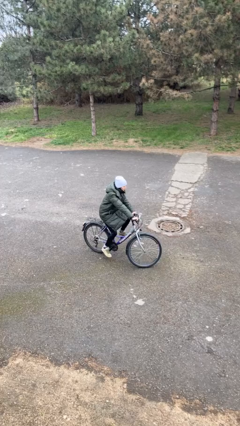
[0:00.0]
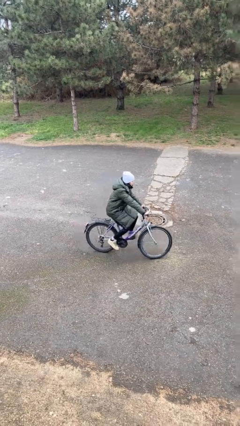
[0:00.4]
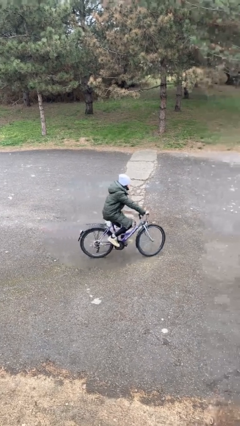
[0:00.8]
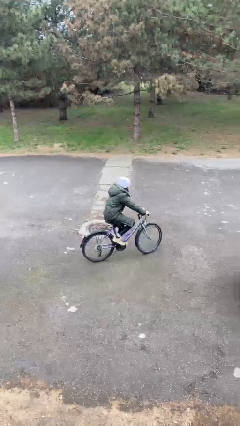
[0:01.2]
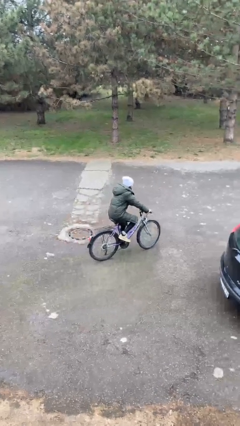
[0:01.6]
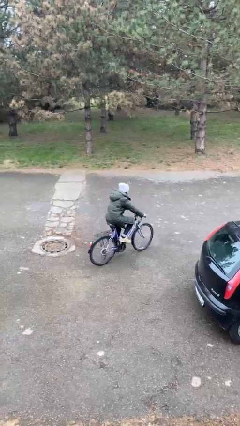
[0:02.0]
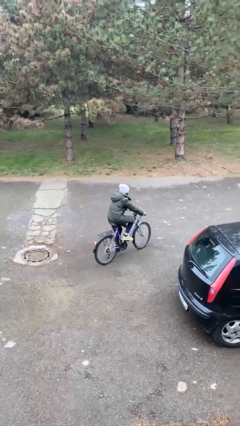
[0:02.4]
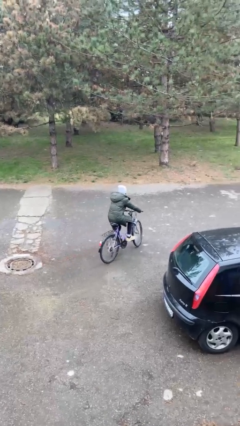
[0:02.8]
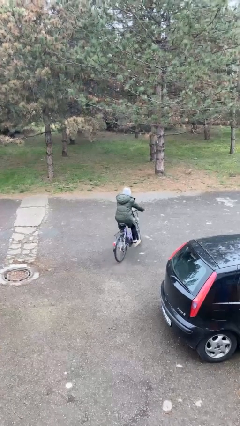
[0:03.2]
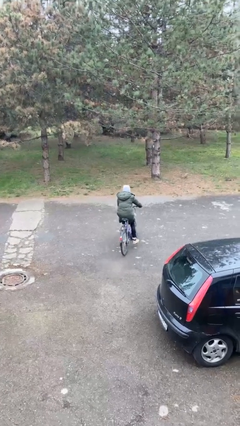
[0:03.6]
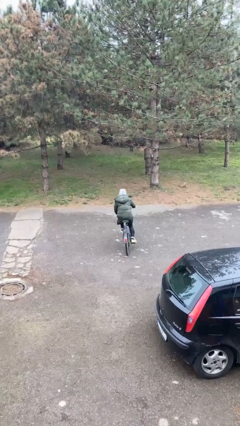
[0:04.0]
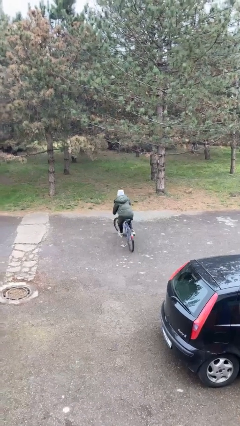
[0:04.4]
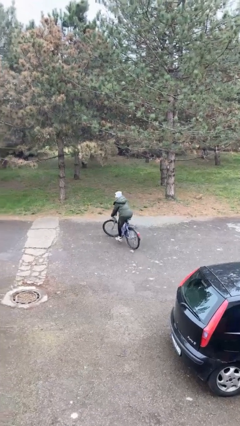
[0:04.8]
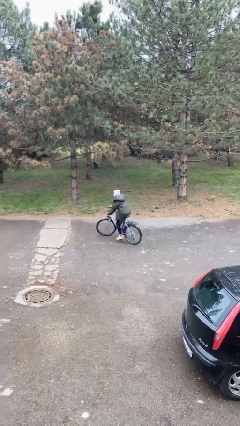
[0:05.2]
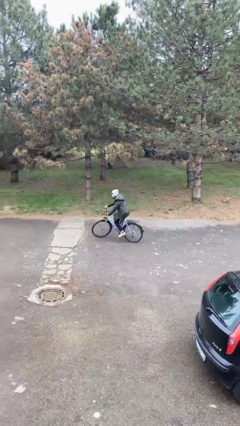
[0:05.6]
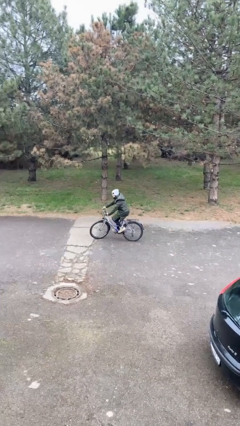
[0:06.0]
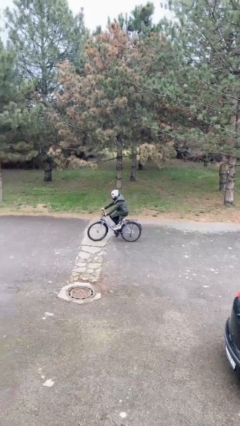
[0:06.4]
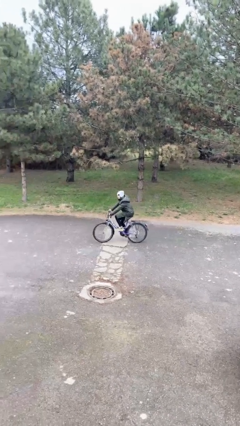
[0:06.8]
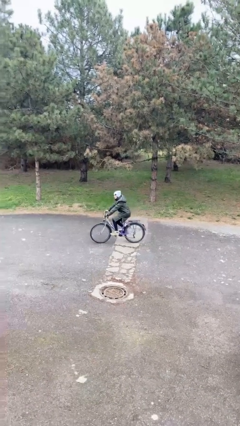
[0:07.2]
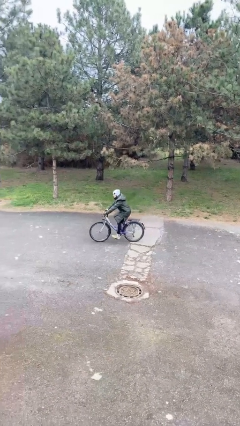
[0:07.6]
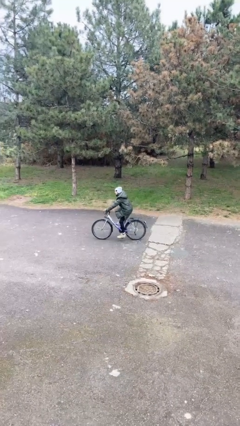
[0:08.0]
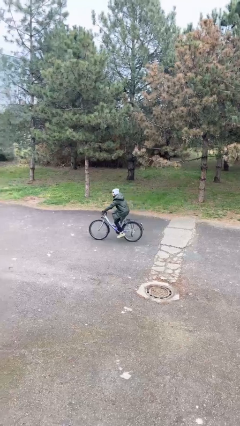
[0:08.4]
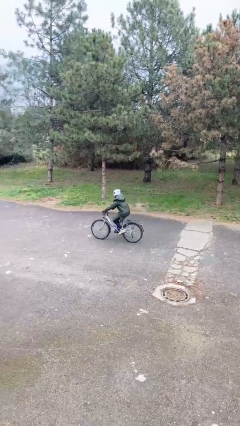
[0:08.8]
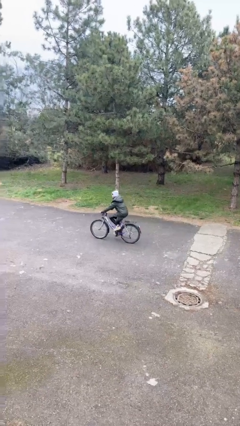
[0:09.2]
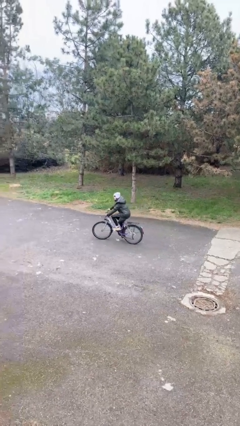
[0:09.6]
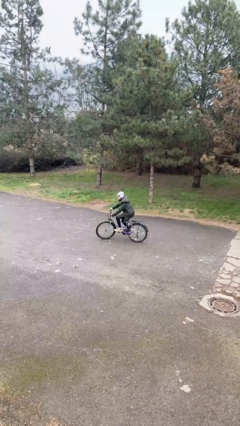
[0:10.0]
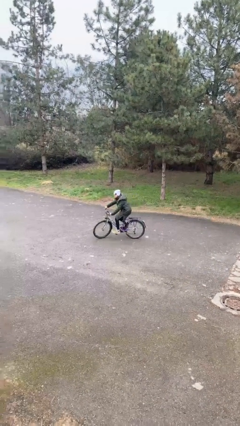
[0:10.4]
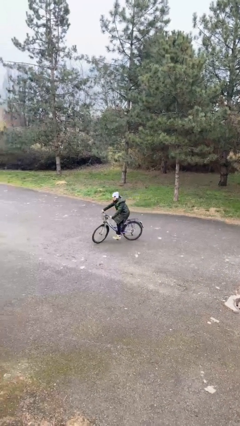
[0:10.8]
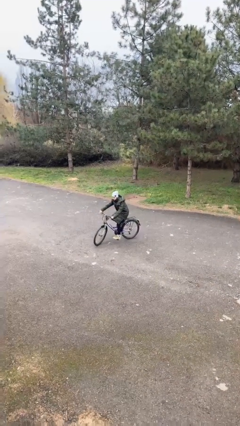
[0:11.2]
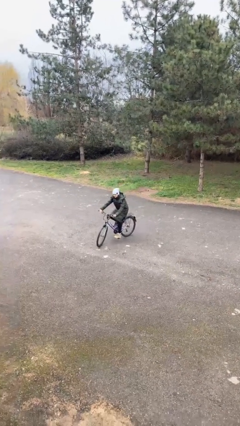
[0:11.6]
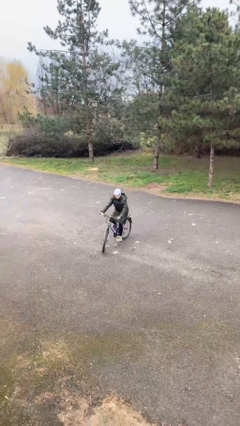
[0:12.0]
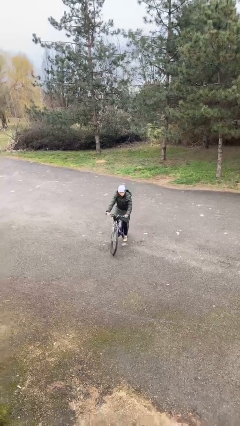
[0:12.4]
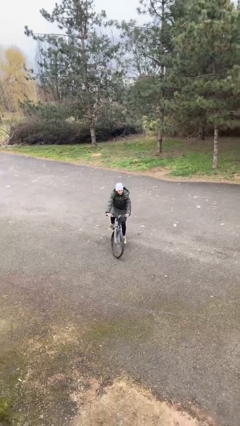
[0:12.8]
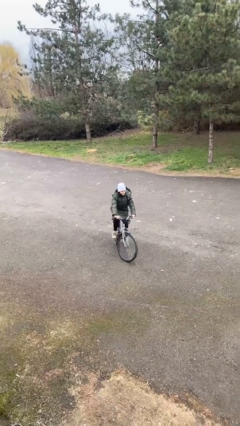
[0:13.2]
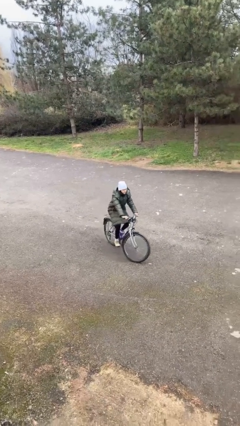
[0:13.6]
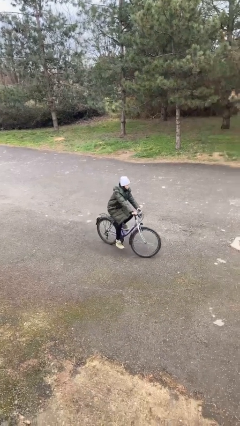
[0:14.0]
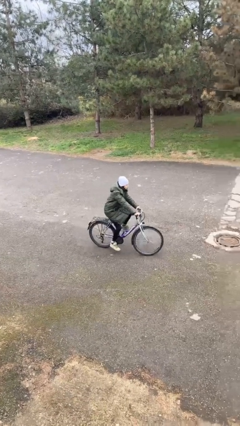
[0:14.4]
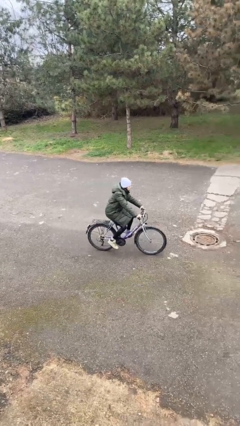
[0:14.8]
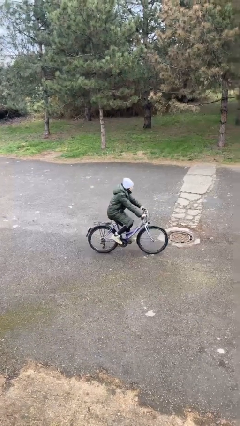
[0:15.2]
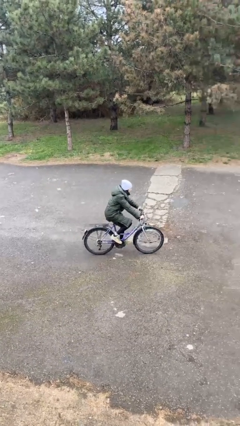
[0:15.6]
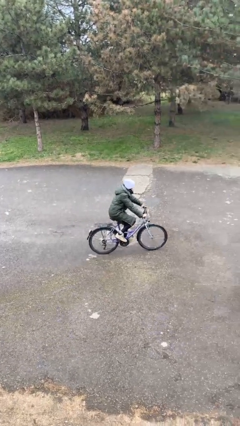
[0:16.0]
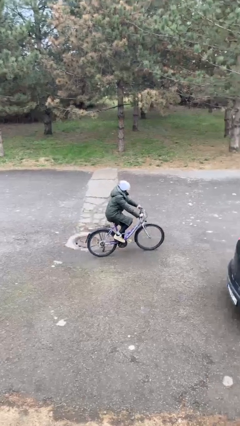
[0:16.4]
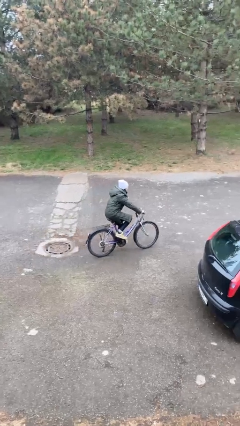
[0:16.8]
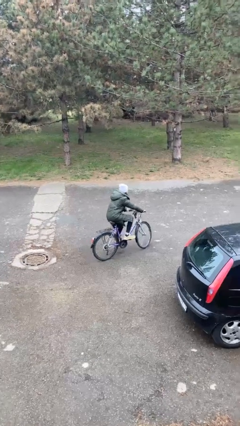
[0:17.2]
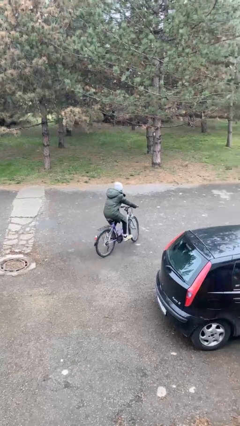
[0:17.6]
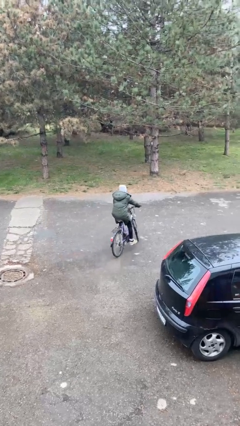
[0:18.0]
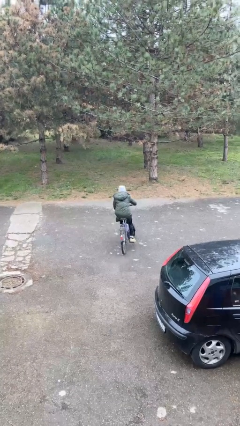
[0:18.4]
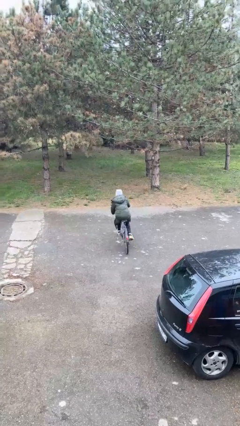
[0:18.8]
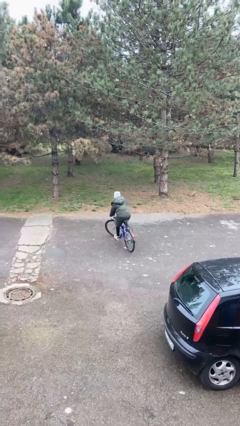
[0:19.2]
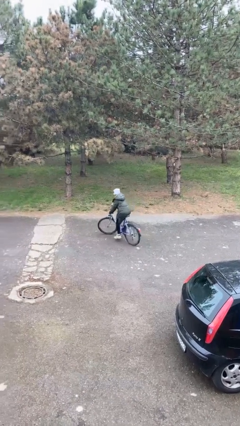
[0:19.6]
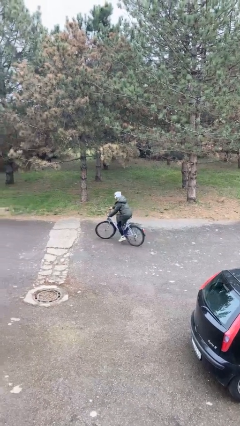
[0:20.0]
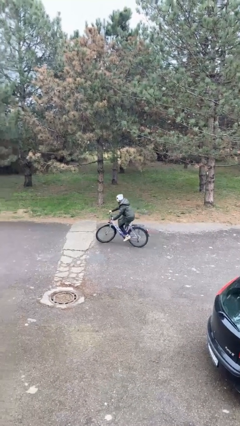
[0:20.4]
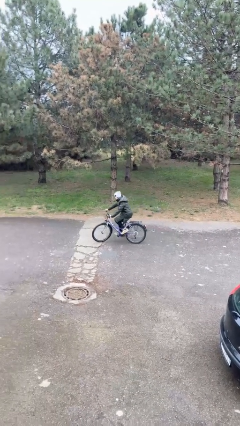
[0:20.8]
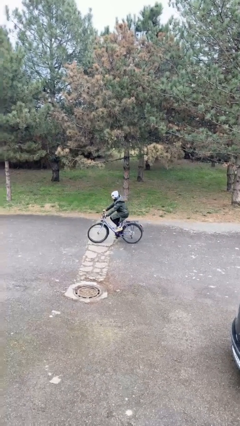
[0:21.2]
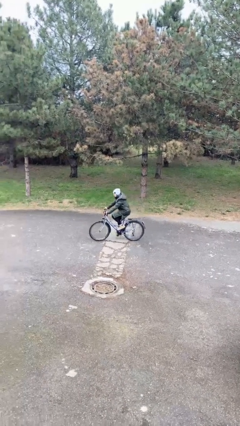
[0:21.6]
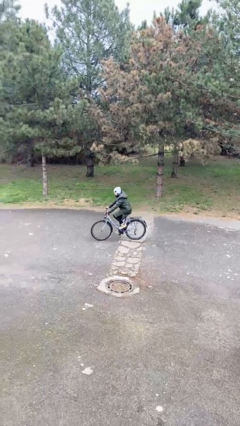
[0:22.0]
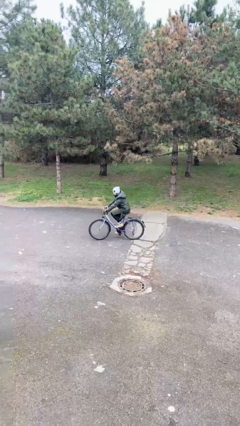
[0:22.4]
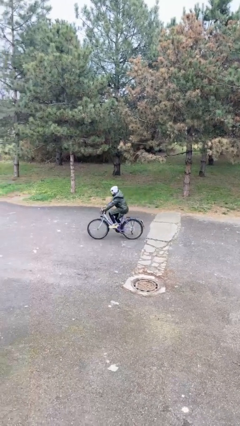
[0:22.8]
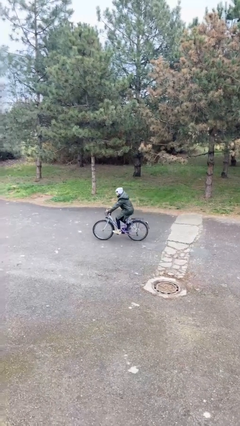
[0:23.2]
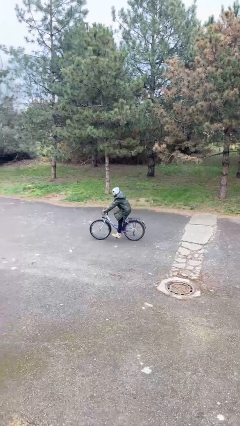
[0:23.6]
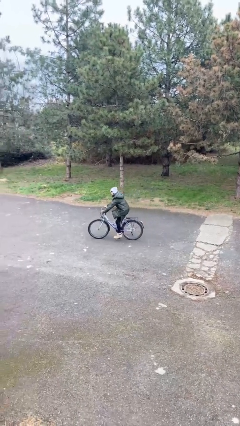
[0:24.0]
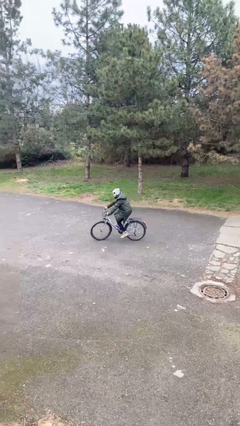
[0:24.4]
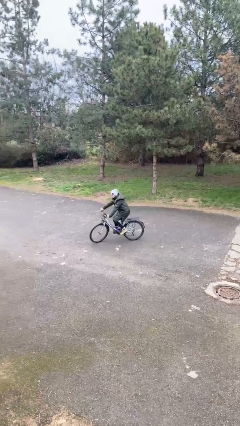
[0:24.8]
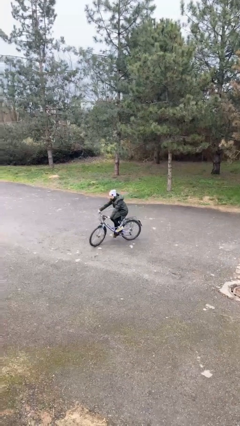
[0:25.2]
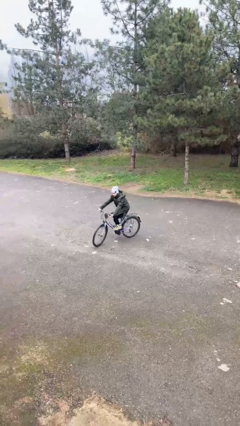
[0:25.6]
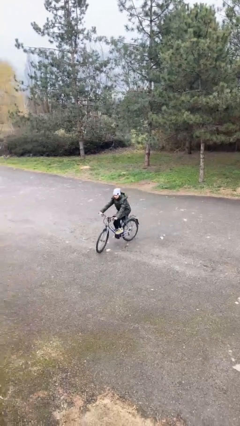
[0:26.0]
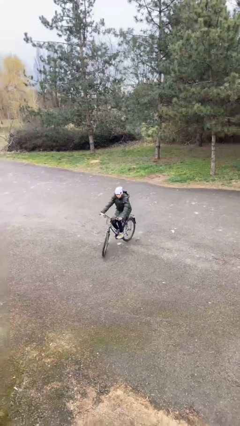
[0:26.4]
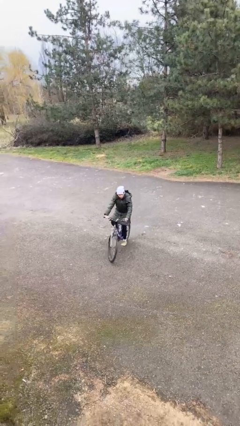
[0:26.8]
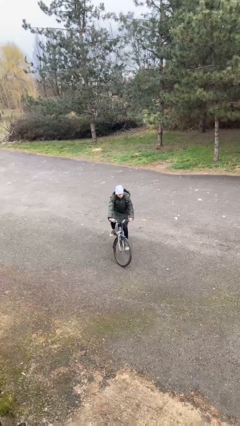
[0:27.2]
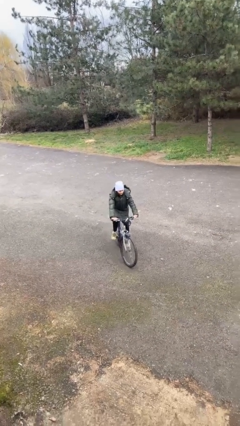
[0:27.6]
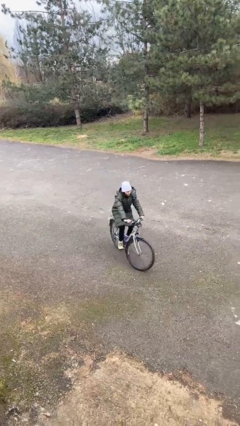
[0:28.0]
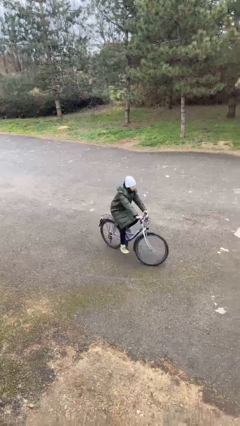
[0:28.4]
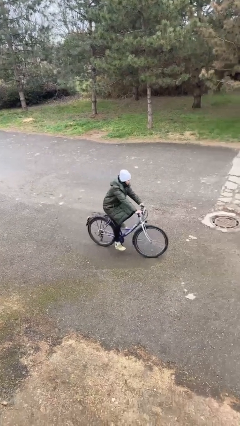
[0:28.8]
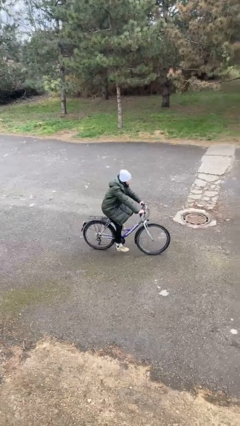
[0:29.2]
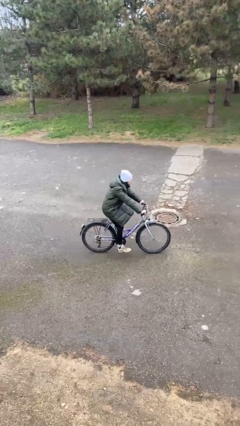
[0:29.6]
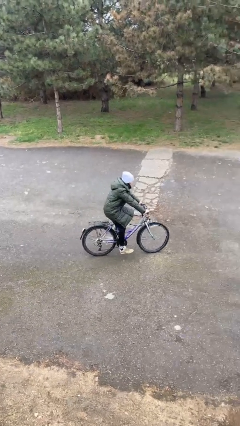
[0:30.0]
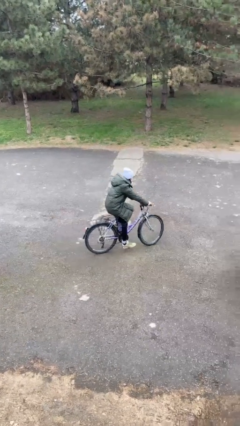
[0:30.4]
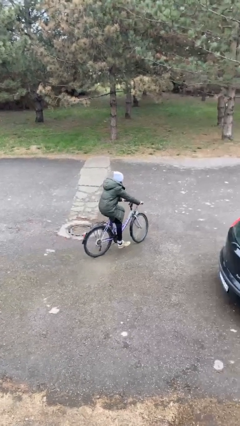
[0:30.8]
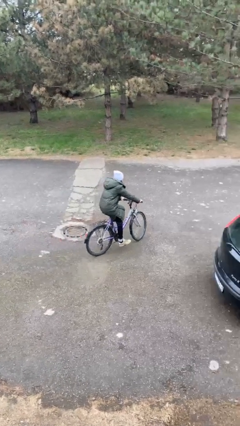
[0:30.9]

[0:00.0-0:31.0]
person rides bicycle

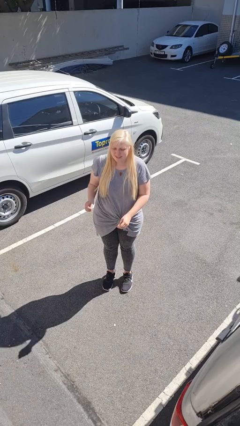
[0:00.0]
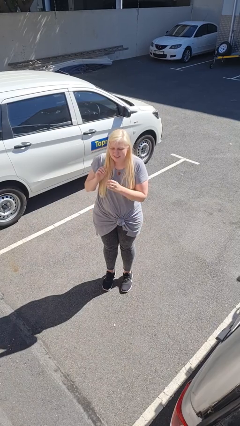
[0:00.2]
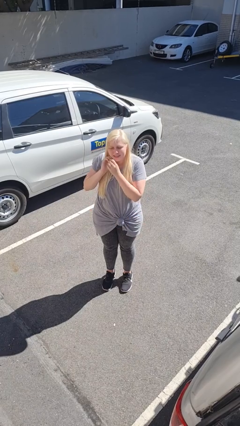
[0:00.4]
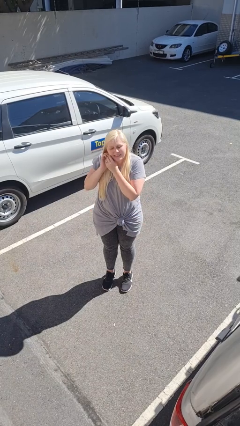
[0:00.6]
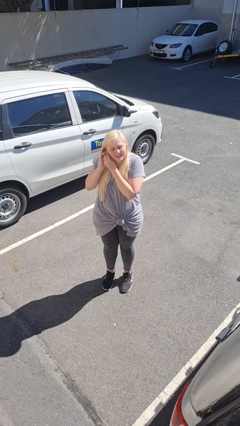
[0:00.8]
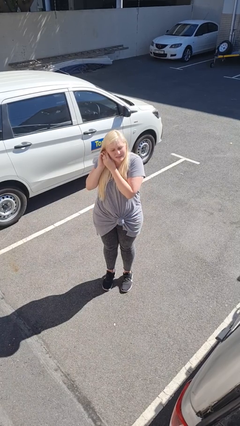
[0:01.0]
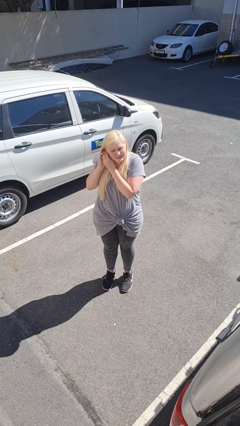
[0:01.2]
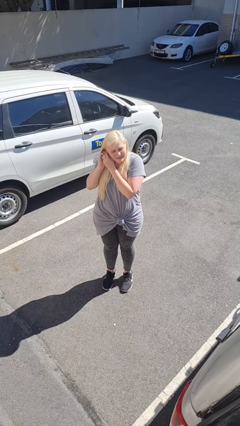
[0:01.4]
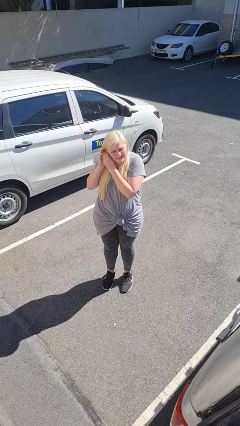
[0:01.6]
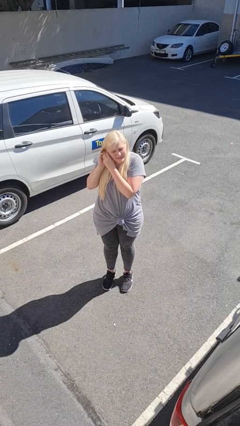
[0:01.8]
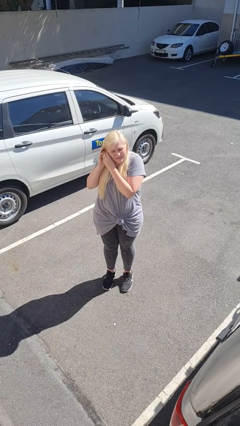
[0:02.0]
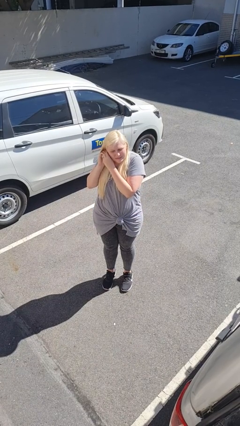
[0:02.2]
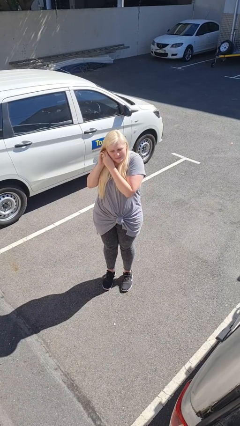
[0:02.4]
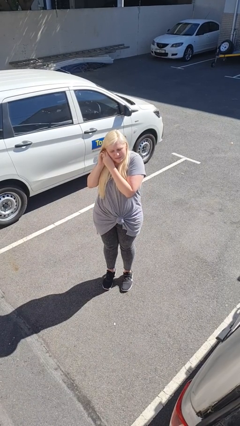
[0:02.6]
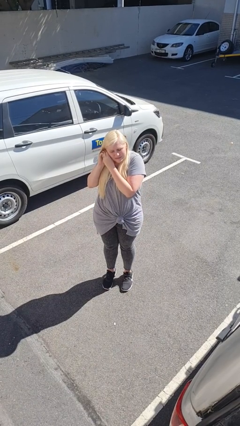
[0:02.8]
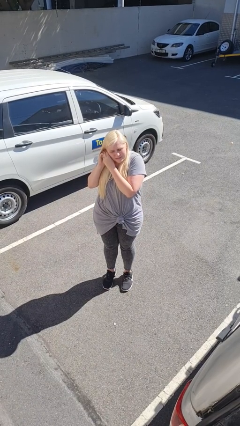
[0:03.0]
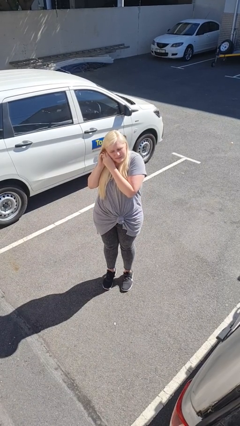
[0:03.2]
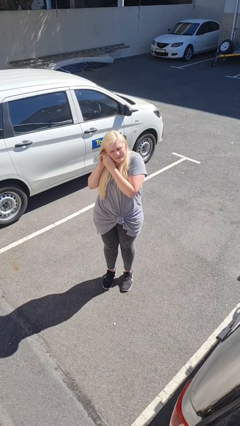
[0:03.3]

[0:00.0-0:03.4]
person puts on earrings
